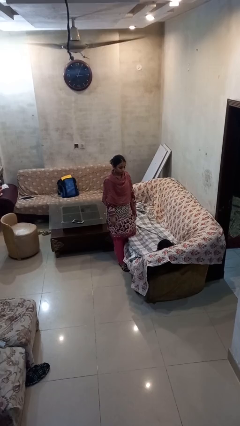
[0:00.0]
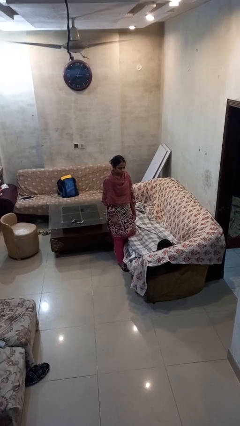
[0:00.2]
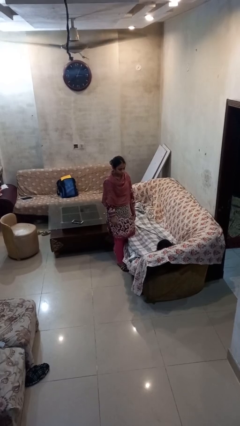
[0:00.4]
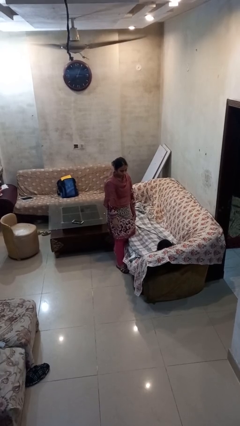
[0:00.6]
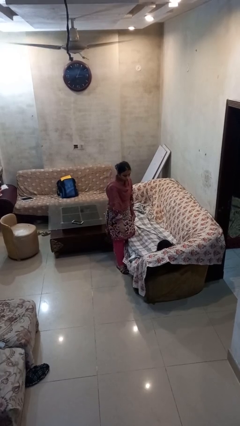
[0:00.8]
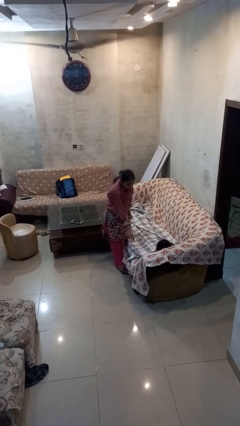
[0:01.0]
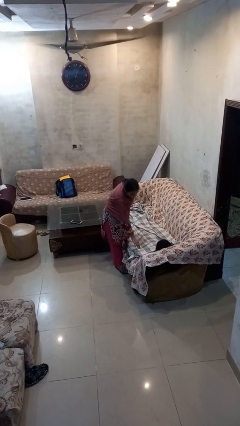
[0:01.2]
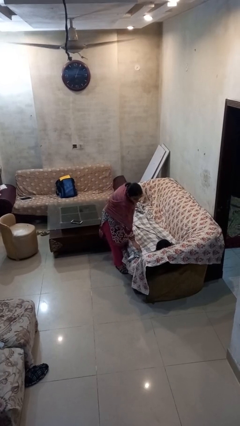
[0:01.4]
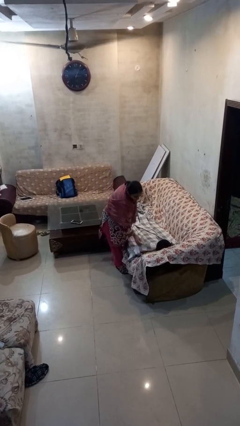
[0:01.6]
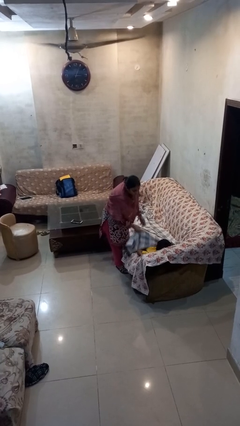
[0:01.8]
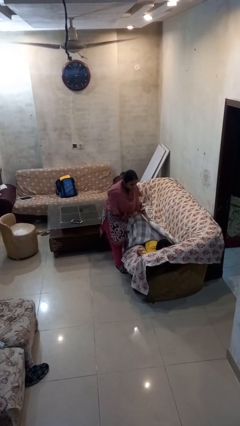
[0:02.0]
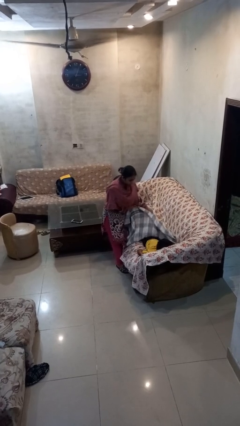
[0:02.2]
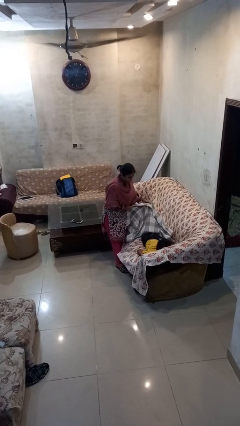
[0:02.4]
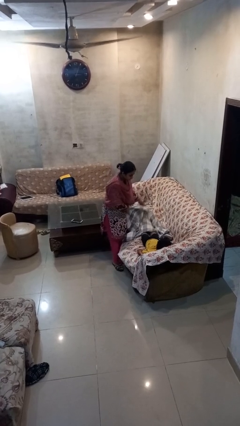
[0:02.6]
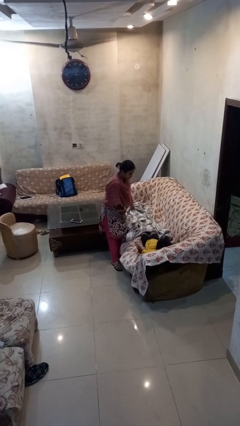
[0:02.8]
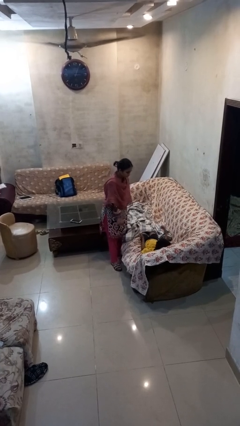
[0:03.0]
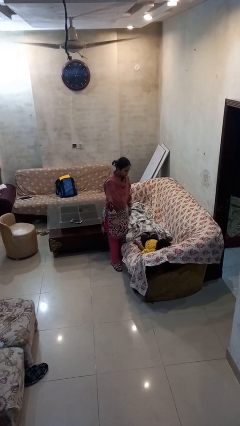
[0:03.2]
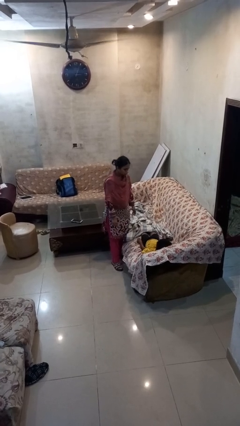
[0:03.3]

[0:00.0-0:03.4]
person uncovers friend with blanket

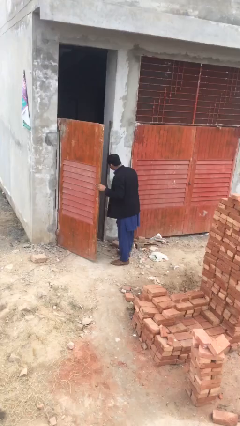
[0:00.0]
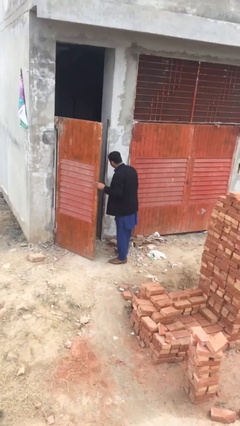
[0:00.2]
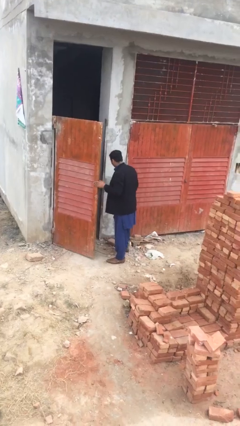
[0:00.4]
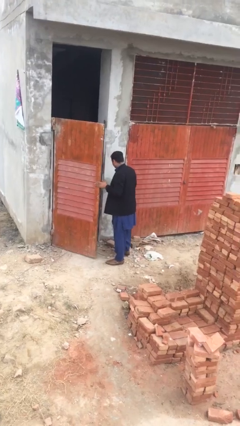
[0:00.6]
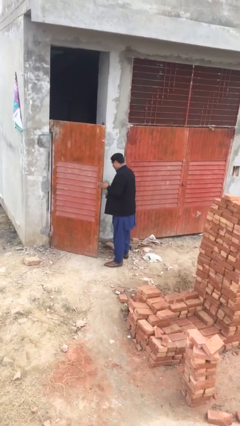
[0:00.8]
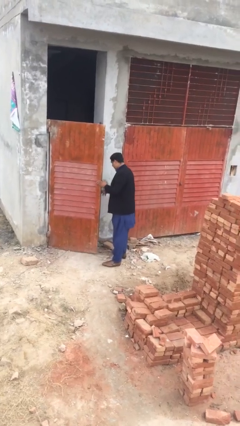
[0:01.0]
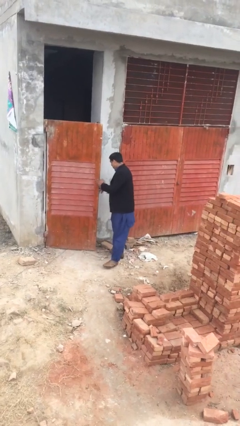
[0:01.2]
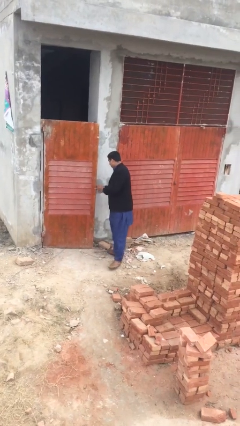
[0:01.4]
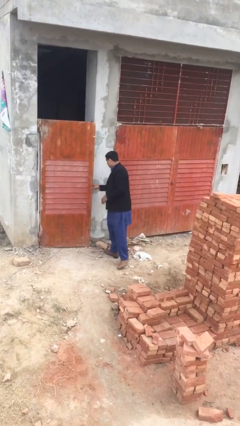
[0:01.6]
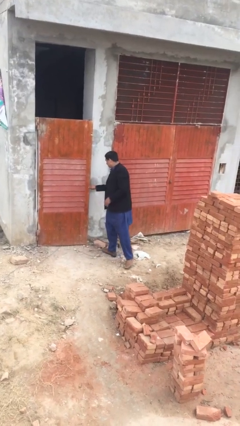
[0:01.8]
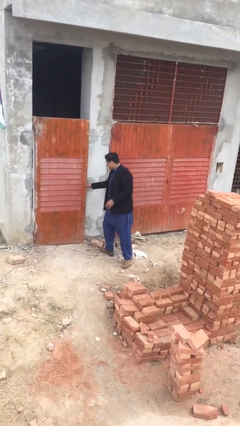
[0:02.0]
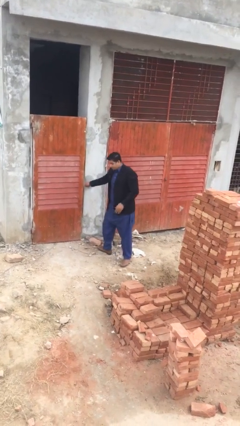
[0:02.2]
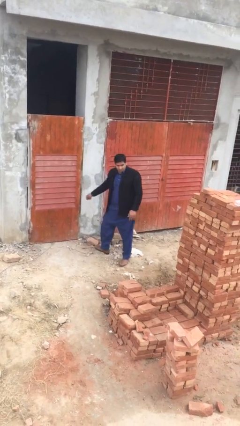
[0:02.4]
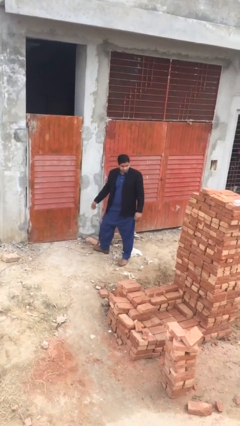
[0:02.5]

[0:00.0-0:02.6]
person closes facility door

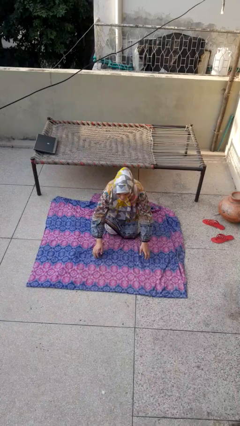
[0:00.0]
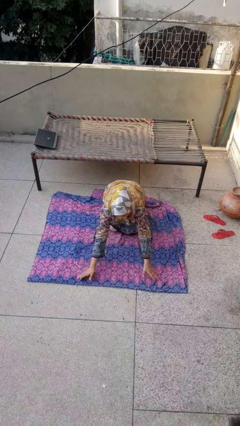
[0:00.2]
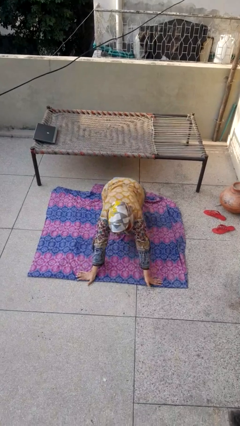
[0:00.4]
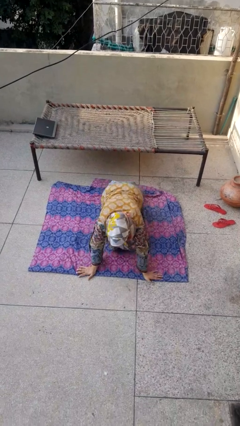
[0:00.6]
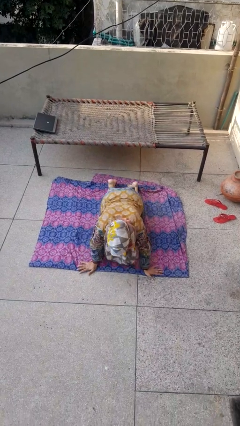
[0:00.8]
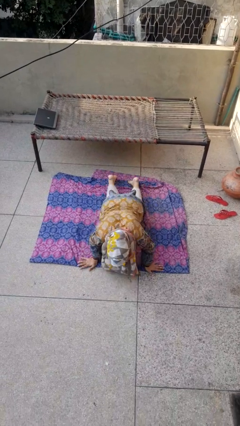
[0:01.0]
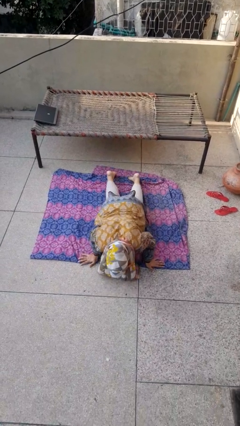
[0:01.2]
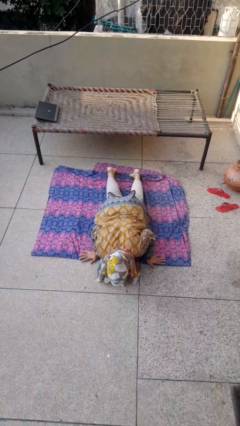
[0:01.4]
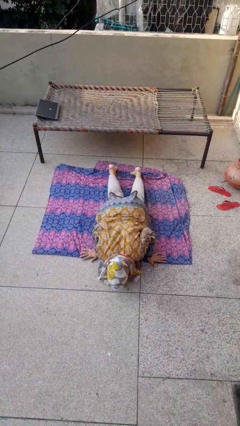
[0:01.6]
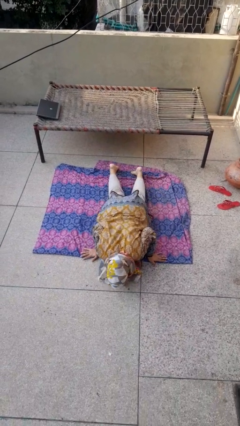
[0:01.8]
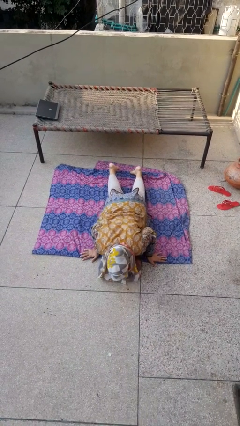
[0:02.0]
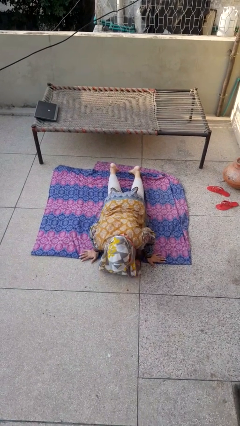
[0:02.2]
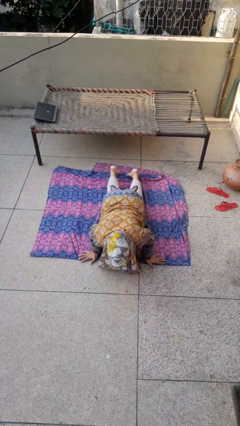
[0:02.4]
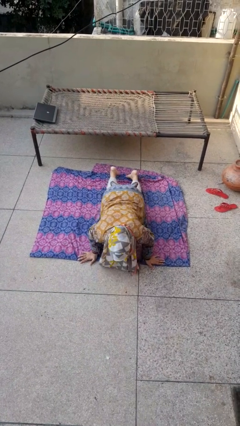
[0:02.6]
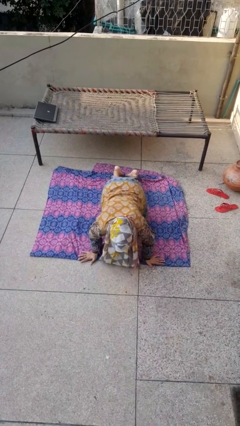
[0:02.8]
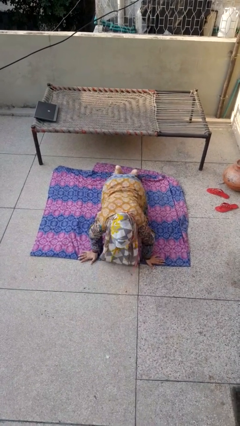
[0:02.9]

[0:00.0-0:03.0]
person exercises with pushup

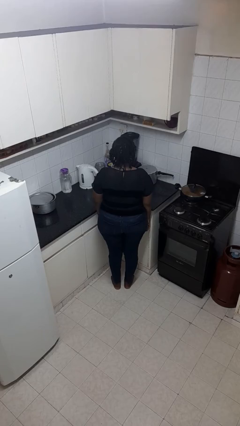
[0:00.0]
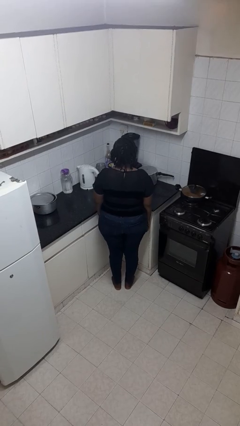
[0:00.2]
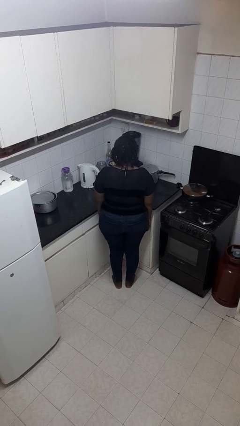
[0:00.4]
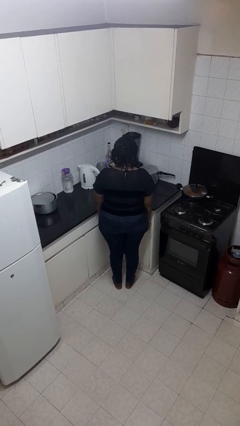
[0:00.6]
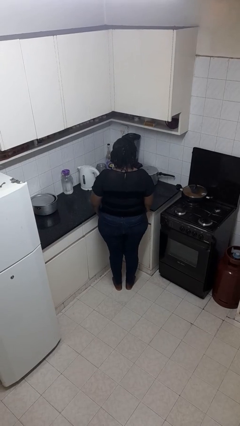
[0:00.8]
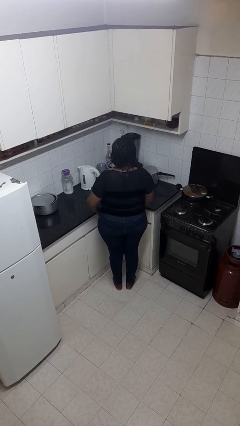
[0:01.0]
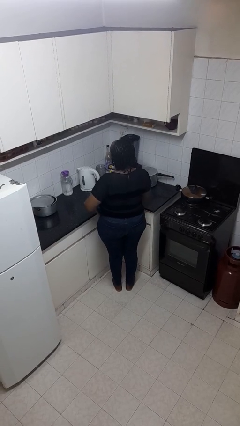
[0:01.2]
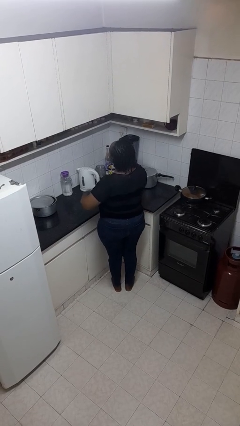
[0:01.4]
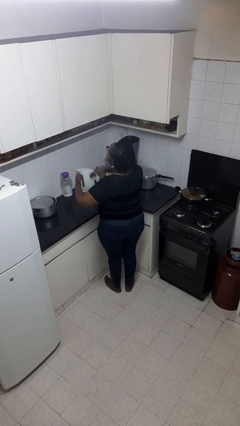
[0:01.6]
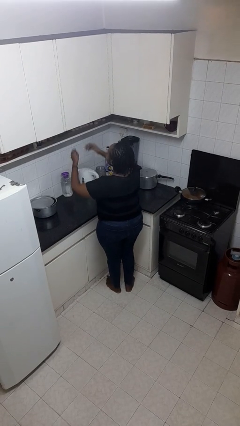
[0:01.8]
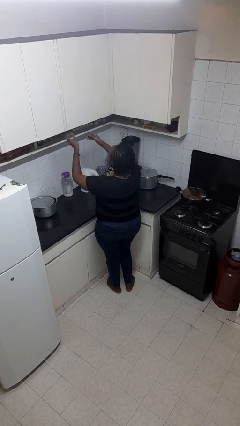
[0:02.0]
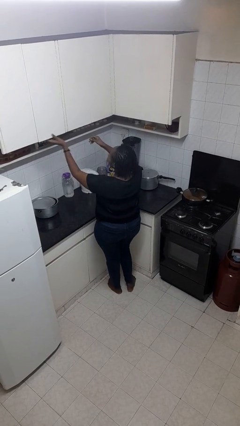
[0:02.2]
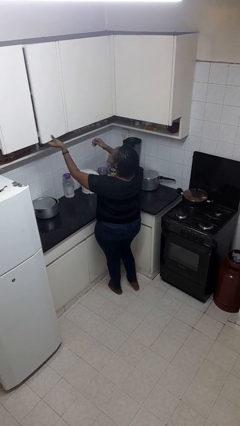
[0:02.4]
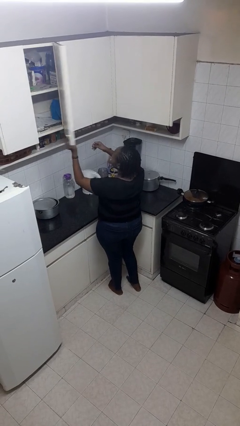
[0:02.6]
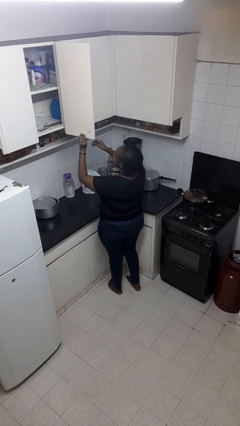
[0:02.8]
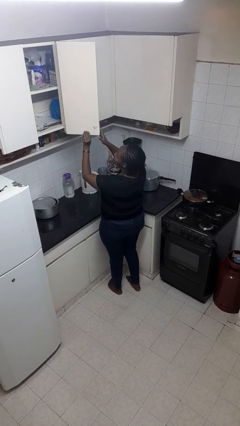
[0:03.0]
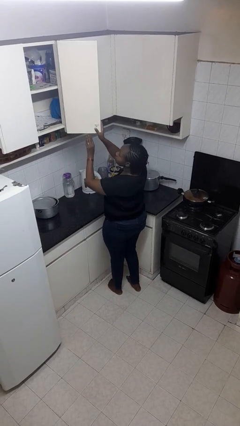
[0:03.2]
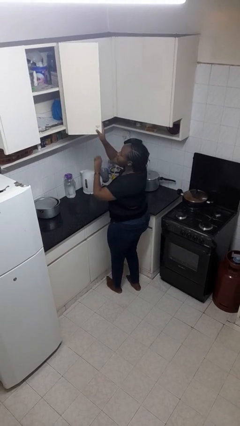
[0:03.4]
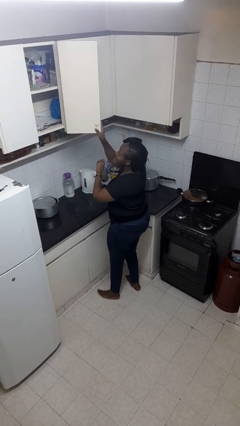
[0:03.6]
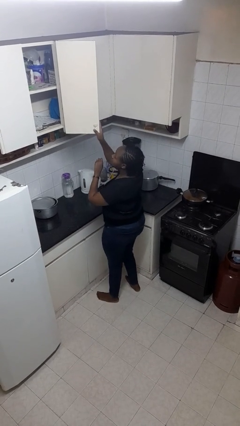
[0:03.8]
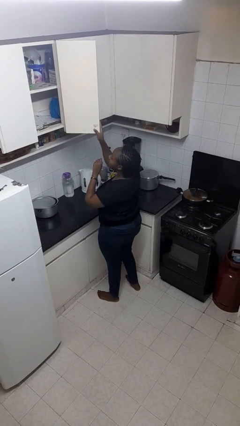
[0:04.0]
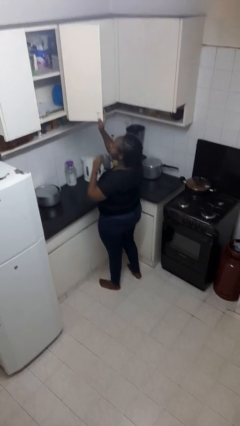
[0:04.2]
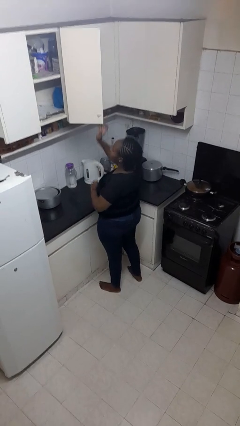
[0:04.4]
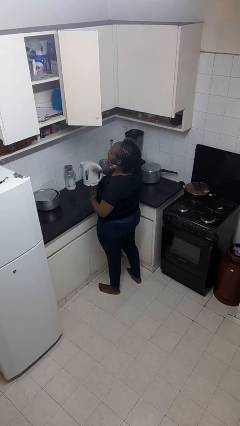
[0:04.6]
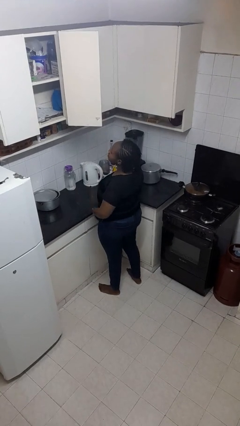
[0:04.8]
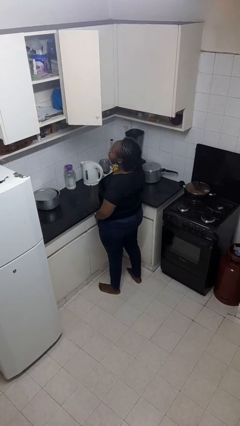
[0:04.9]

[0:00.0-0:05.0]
person opens cabinet

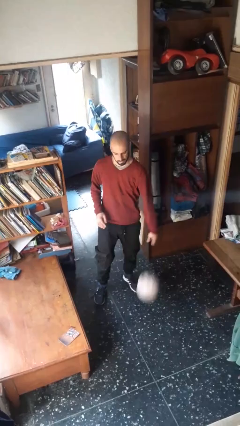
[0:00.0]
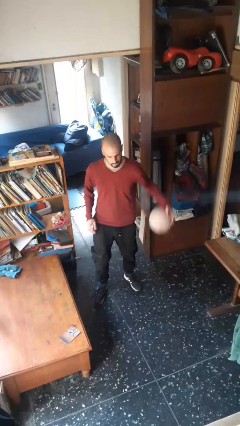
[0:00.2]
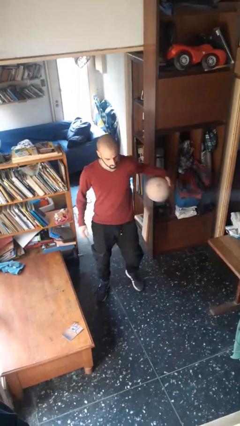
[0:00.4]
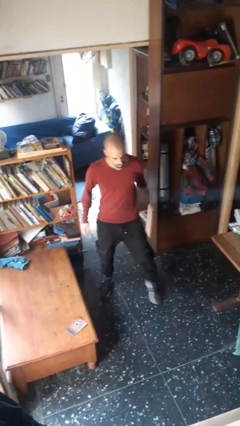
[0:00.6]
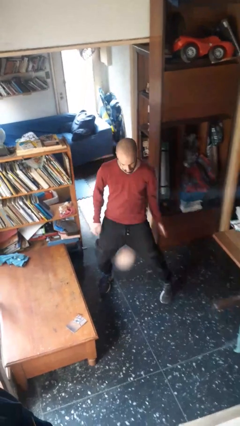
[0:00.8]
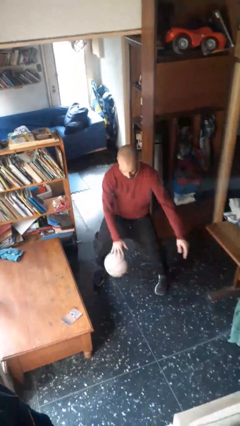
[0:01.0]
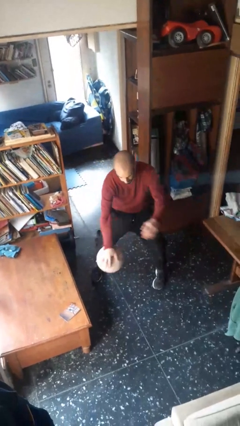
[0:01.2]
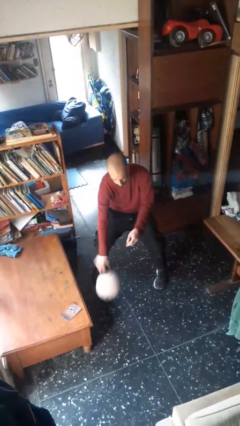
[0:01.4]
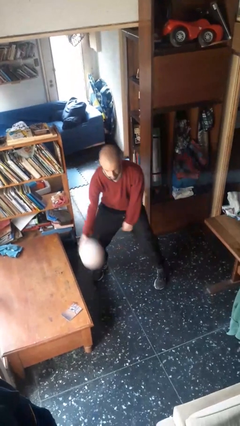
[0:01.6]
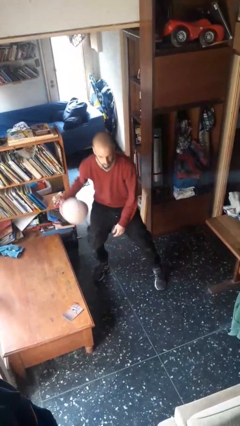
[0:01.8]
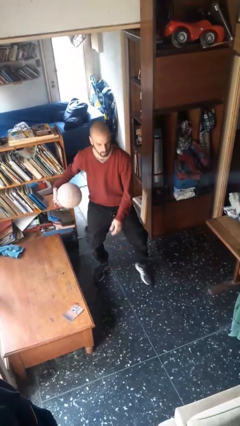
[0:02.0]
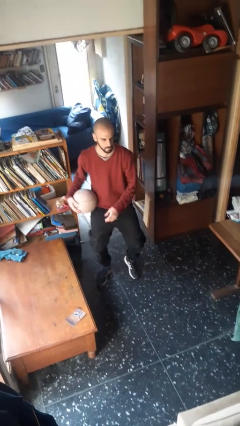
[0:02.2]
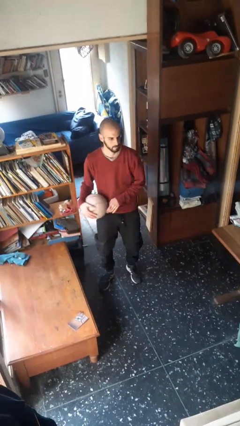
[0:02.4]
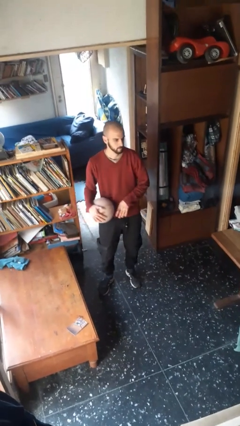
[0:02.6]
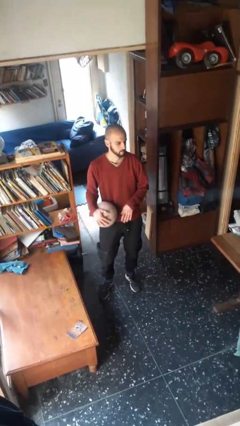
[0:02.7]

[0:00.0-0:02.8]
person bounces ball on floor

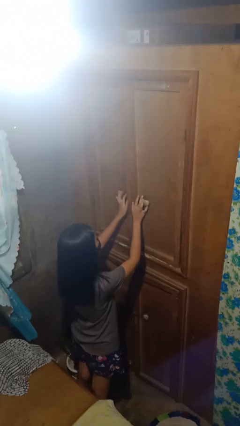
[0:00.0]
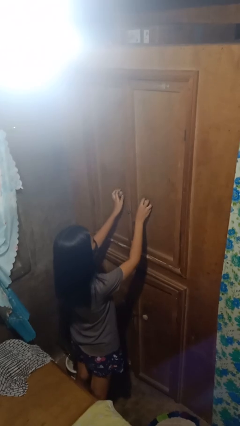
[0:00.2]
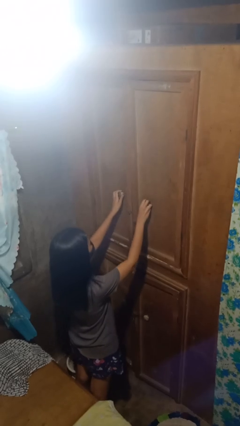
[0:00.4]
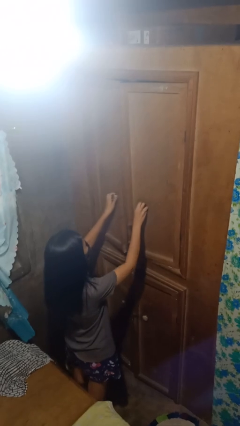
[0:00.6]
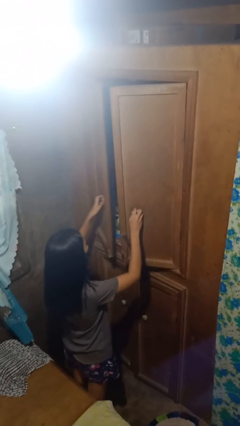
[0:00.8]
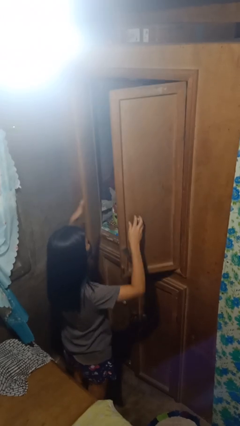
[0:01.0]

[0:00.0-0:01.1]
person opens closet door
